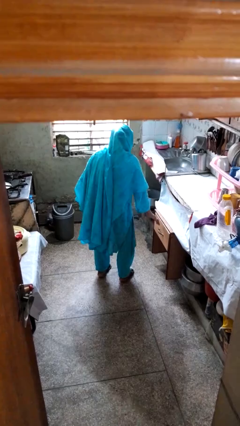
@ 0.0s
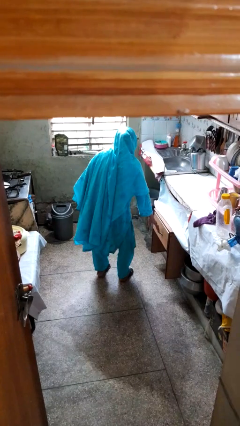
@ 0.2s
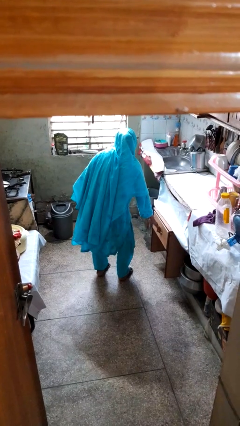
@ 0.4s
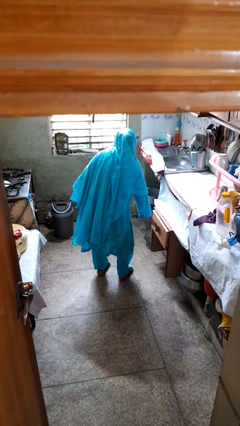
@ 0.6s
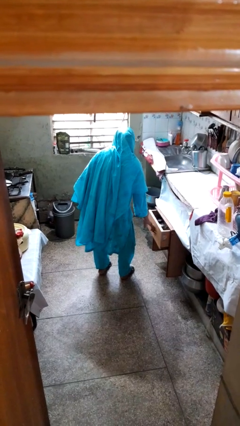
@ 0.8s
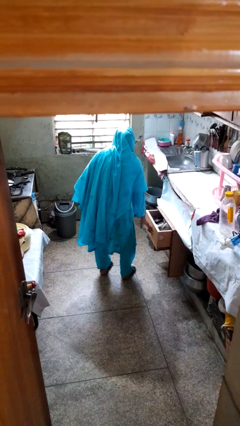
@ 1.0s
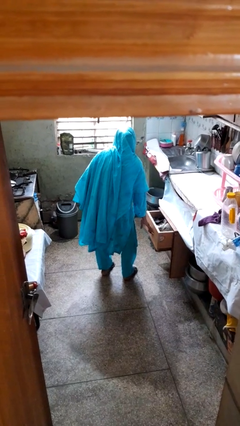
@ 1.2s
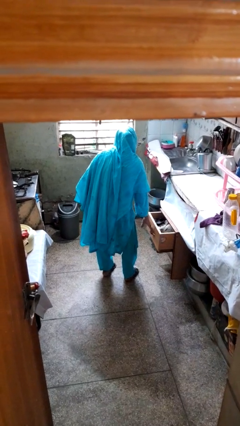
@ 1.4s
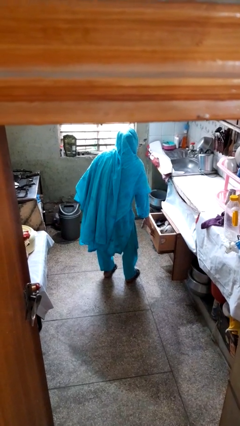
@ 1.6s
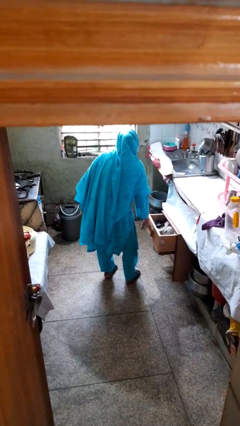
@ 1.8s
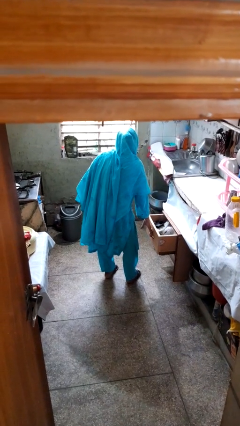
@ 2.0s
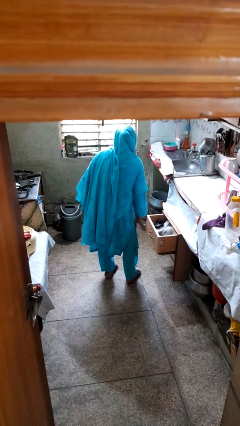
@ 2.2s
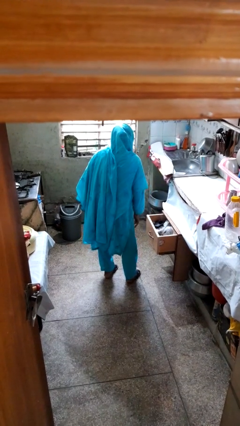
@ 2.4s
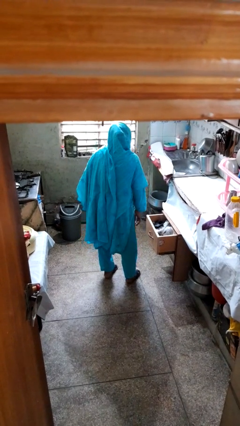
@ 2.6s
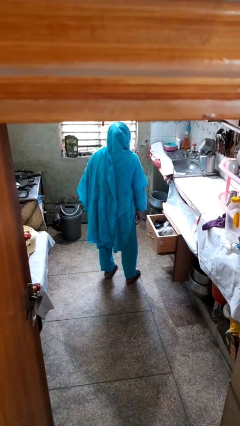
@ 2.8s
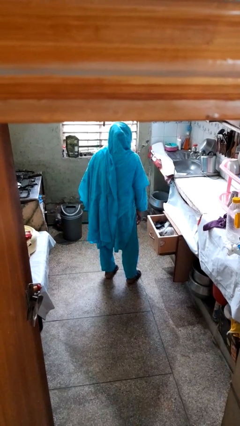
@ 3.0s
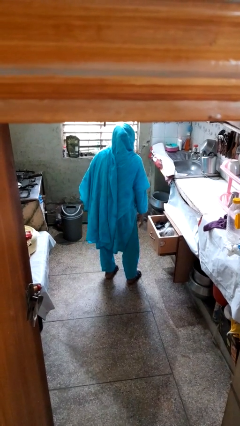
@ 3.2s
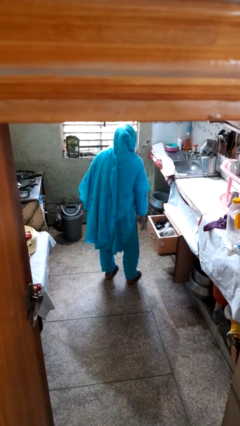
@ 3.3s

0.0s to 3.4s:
person opens kitchen drawer

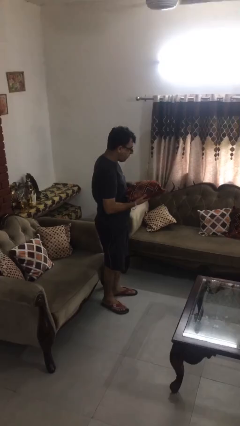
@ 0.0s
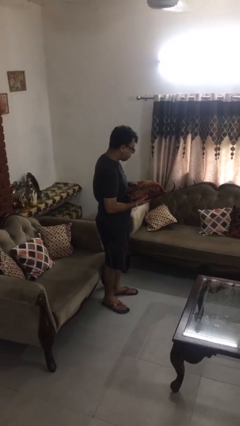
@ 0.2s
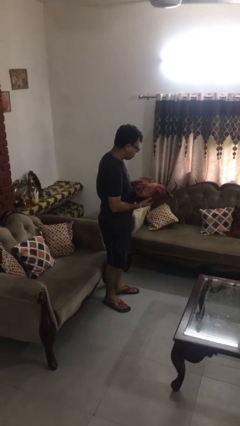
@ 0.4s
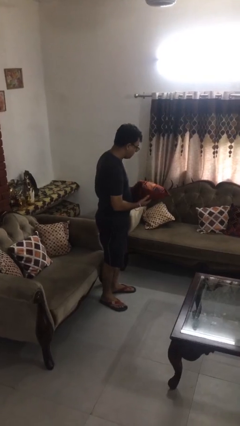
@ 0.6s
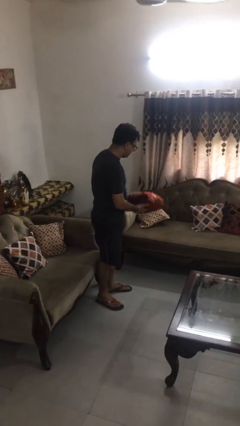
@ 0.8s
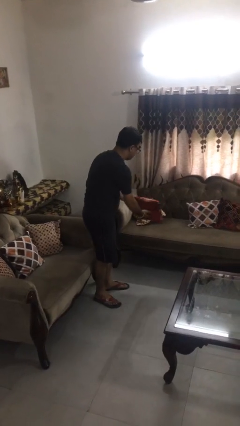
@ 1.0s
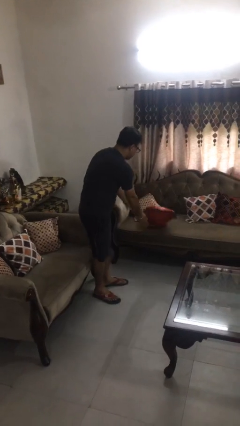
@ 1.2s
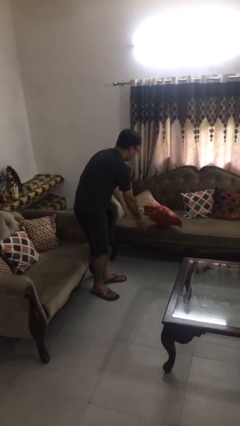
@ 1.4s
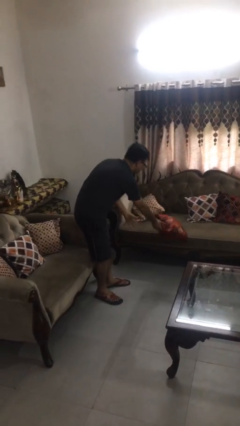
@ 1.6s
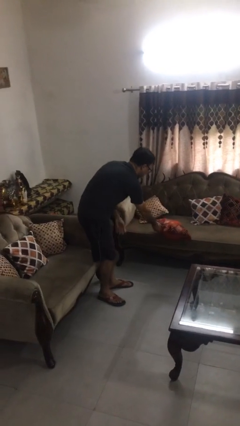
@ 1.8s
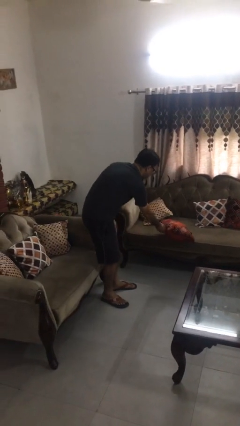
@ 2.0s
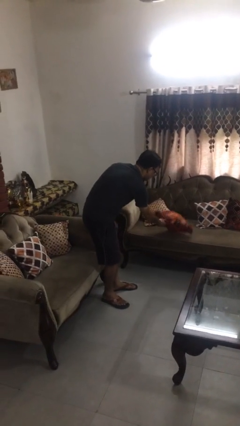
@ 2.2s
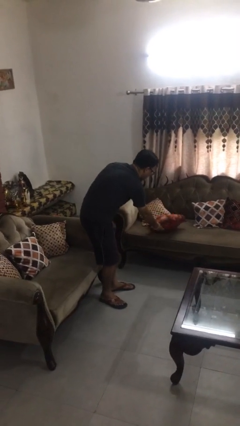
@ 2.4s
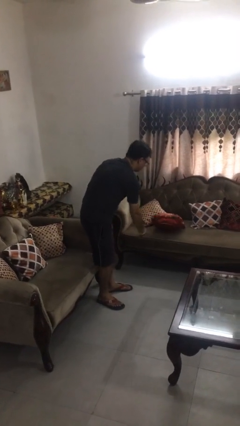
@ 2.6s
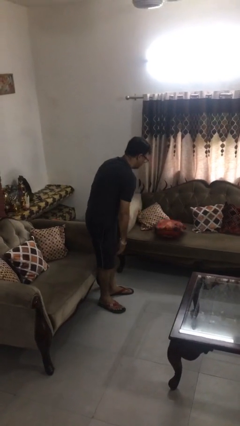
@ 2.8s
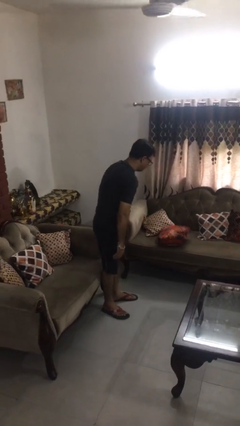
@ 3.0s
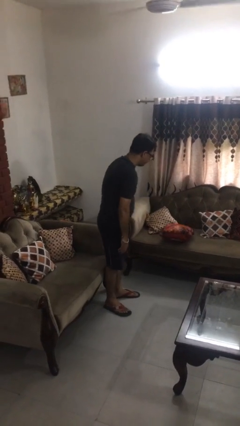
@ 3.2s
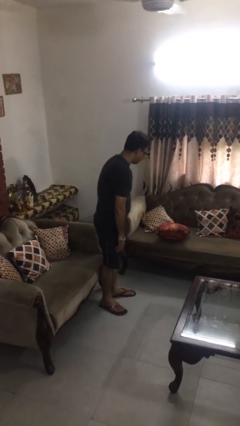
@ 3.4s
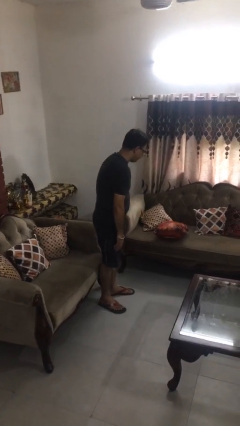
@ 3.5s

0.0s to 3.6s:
person puts down object on couch

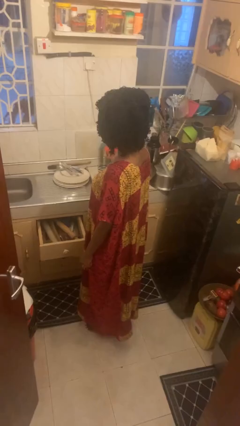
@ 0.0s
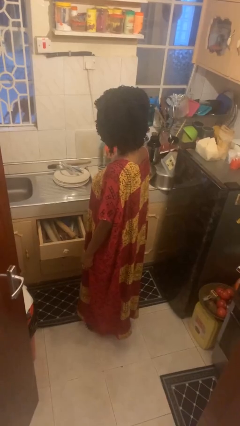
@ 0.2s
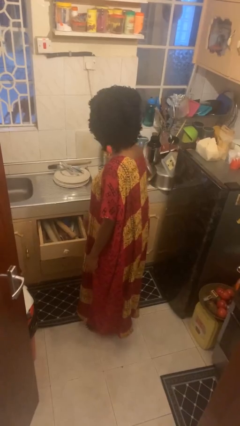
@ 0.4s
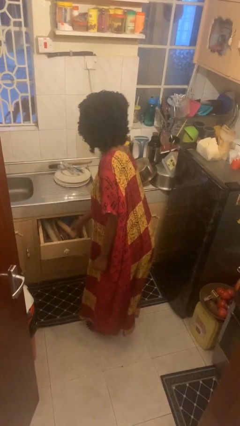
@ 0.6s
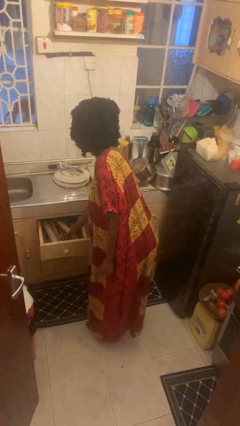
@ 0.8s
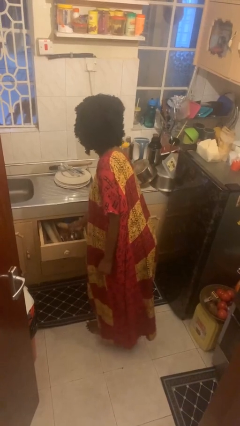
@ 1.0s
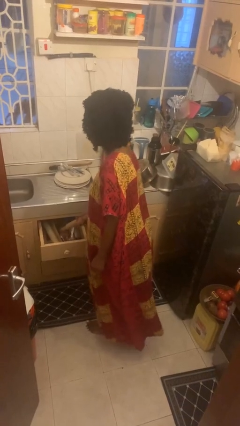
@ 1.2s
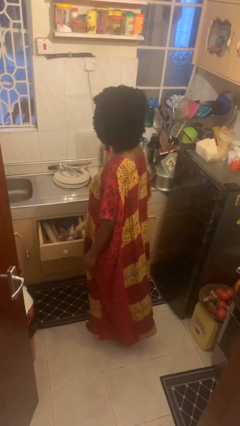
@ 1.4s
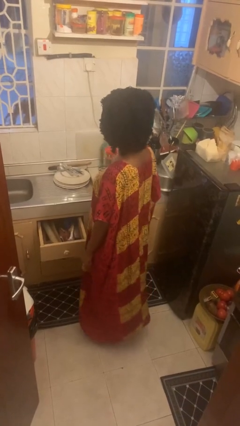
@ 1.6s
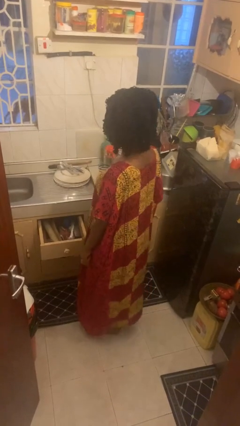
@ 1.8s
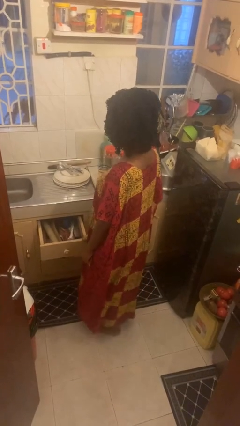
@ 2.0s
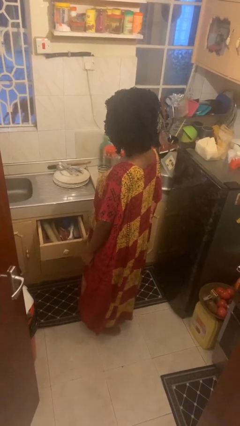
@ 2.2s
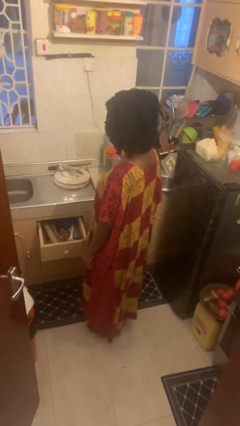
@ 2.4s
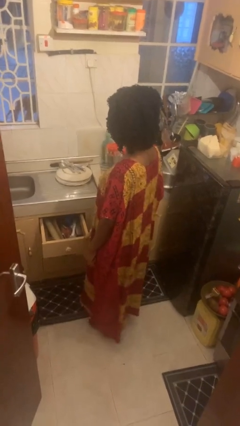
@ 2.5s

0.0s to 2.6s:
person takes object from kitchen drawer

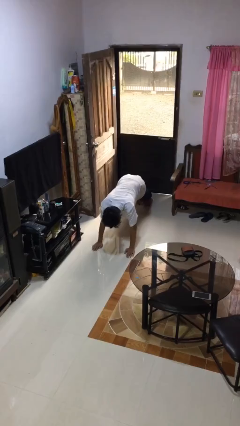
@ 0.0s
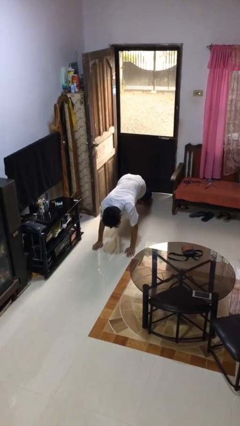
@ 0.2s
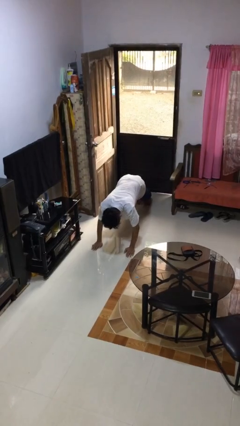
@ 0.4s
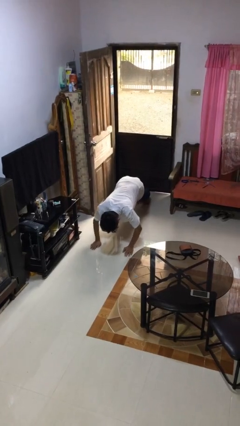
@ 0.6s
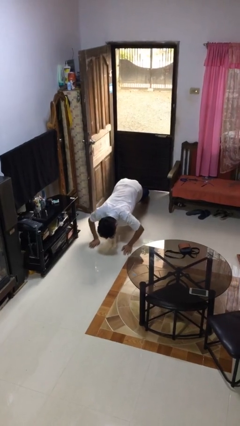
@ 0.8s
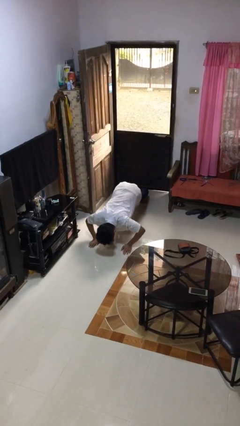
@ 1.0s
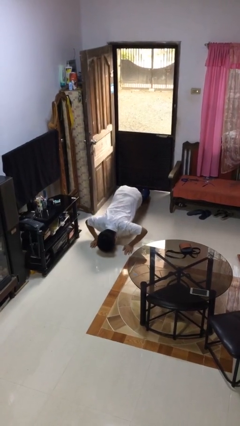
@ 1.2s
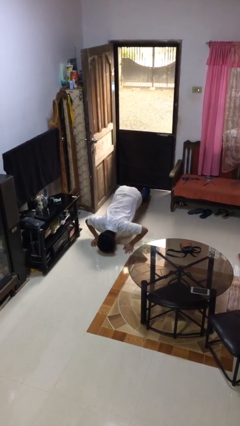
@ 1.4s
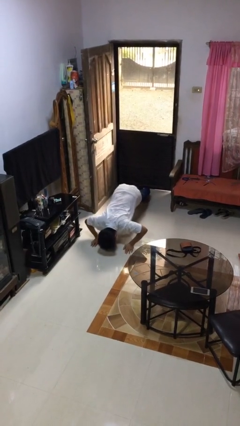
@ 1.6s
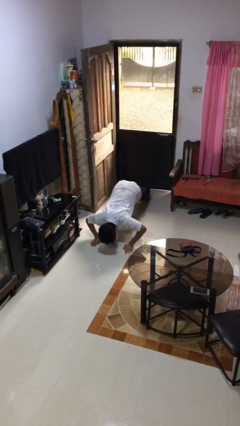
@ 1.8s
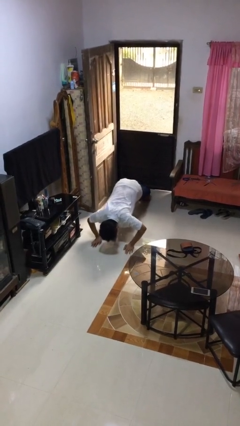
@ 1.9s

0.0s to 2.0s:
person exercises with pushup

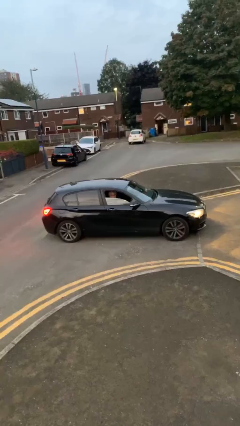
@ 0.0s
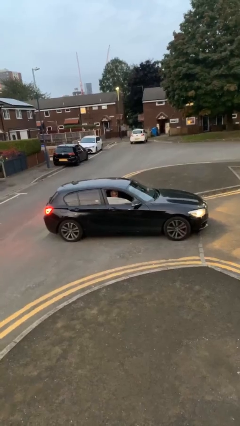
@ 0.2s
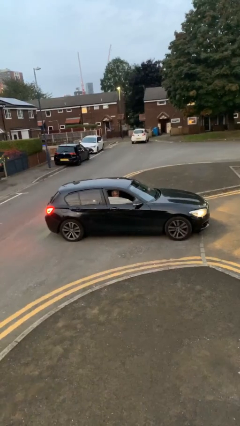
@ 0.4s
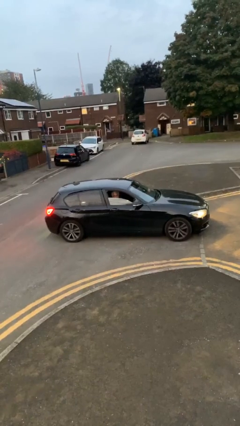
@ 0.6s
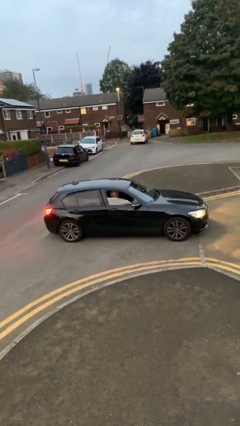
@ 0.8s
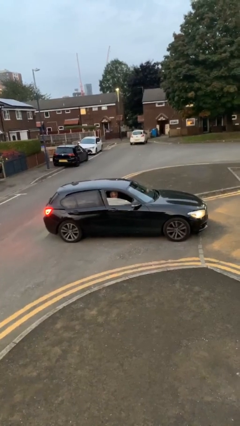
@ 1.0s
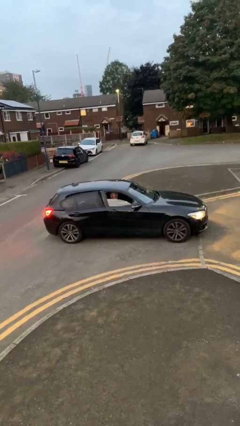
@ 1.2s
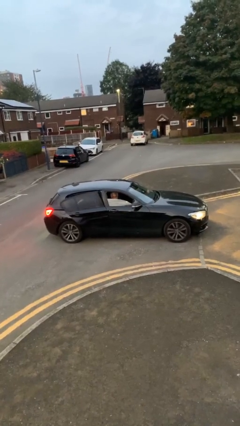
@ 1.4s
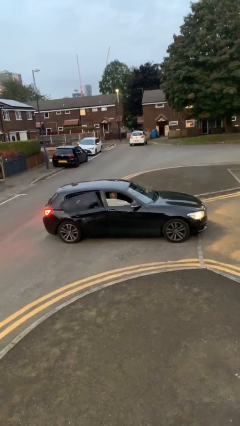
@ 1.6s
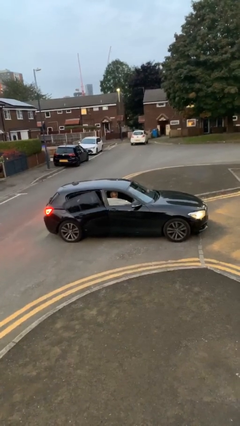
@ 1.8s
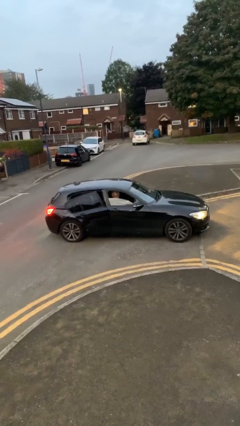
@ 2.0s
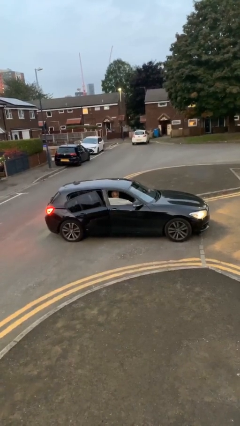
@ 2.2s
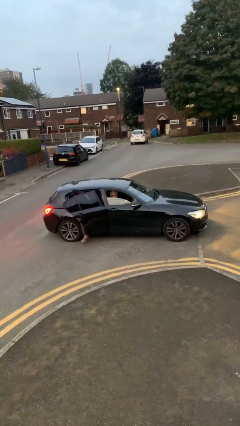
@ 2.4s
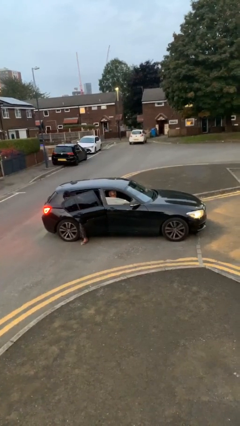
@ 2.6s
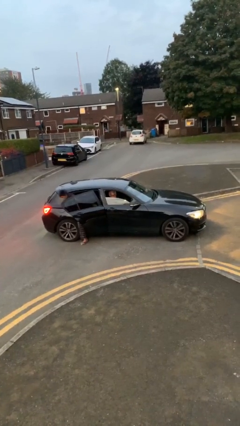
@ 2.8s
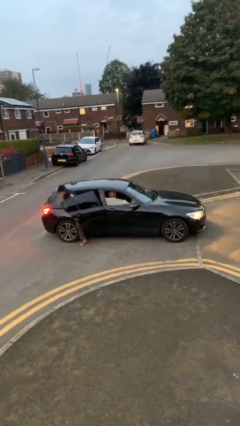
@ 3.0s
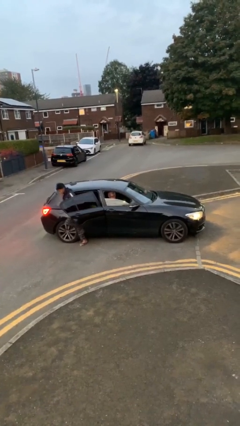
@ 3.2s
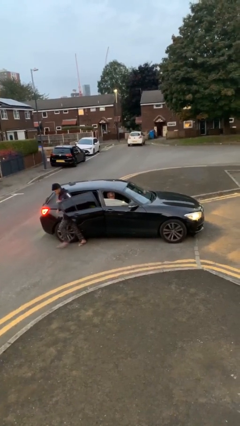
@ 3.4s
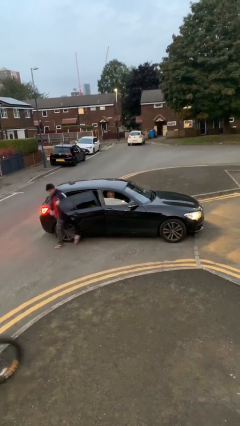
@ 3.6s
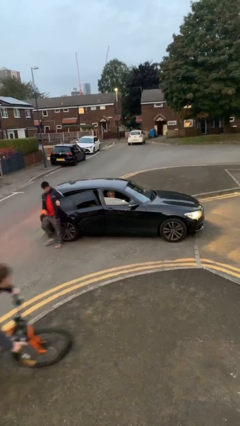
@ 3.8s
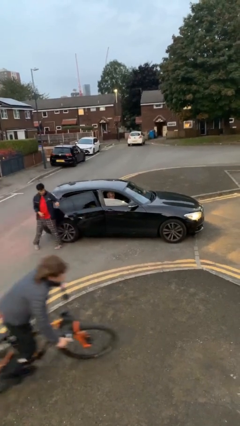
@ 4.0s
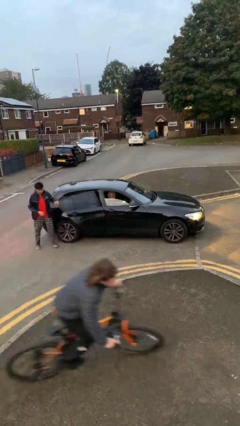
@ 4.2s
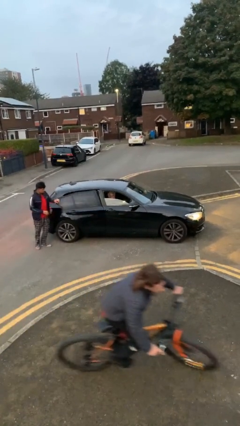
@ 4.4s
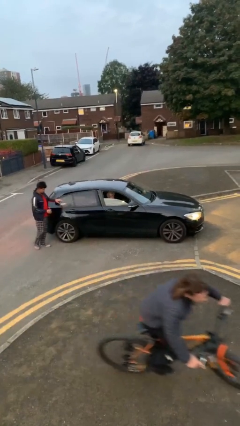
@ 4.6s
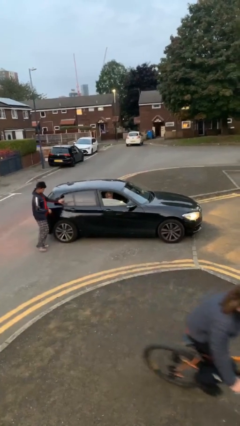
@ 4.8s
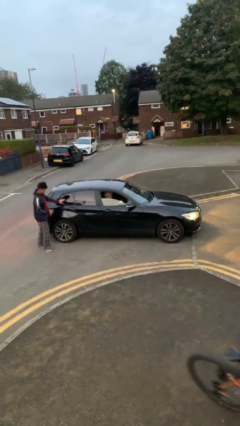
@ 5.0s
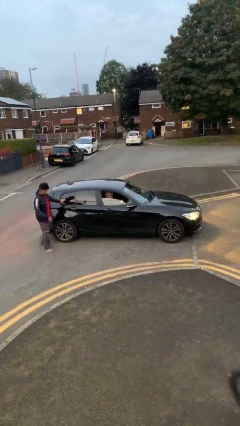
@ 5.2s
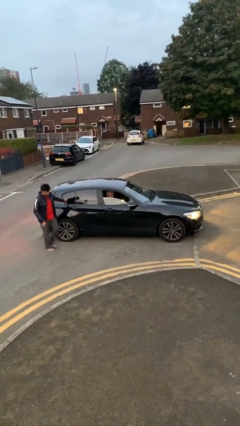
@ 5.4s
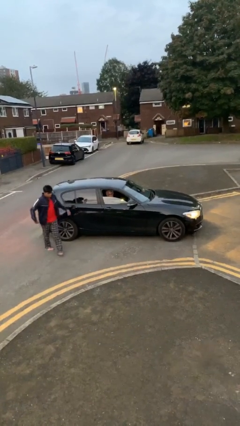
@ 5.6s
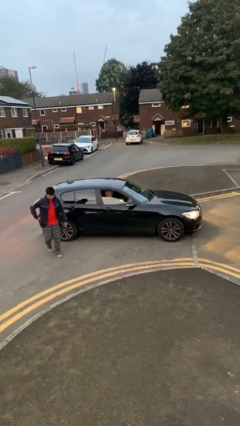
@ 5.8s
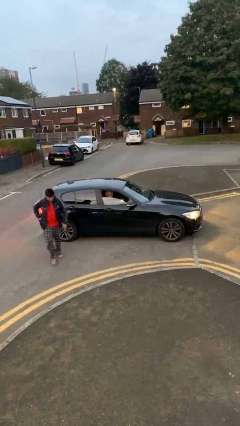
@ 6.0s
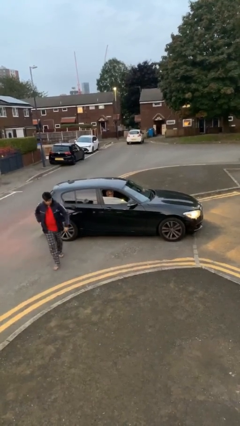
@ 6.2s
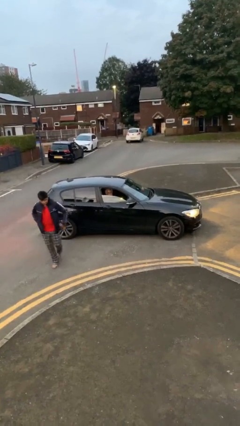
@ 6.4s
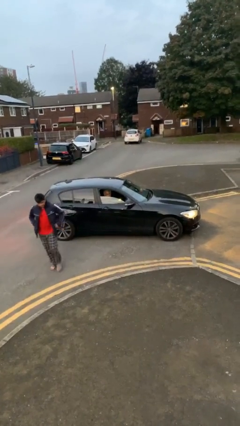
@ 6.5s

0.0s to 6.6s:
car drops off person
